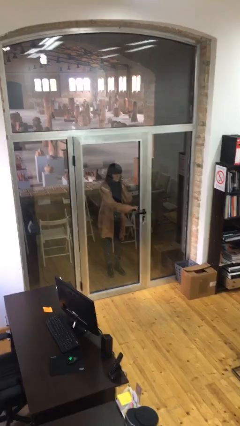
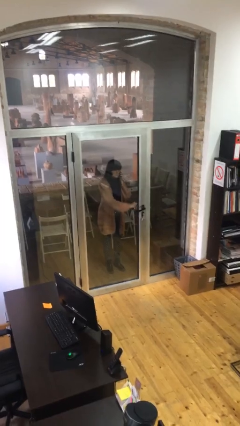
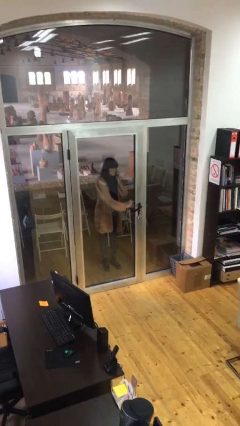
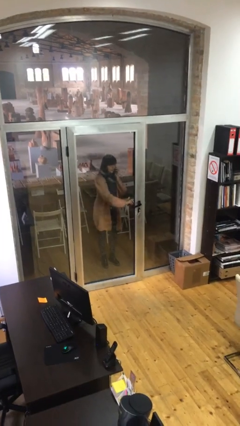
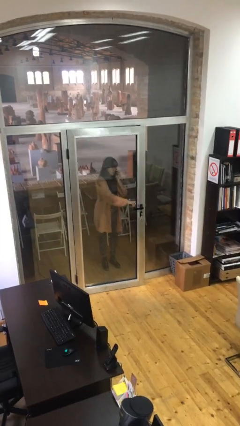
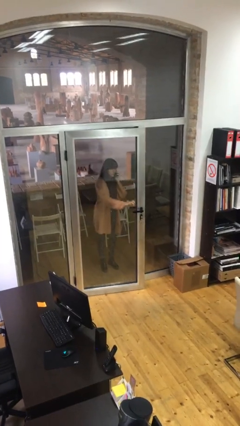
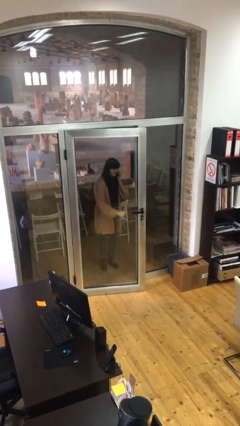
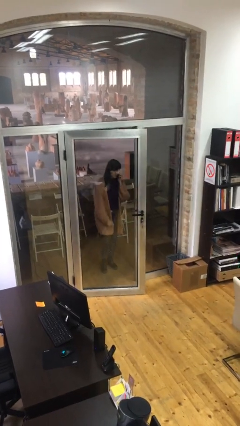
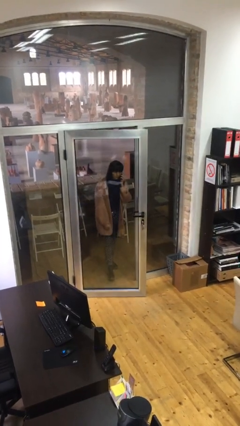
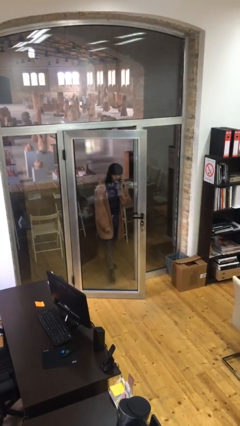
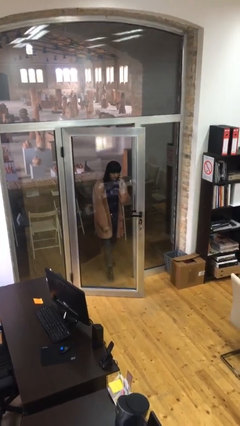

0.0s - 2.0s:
person opens facility door

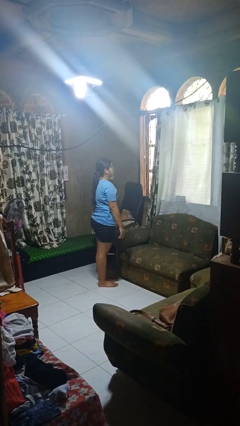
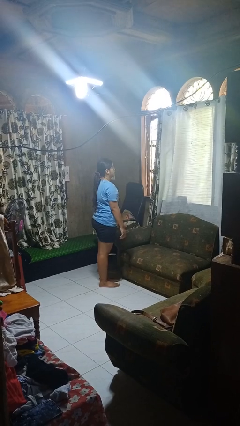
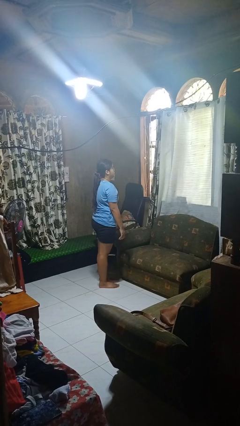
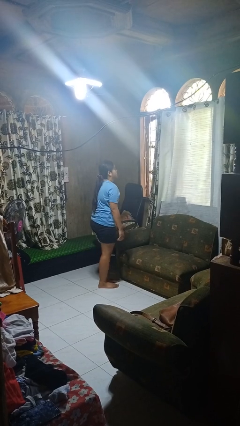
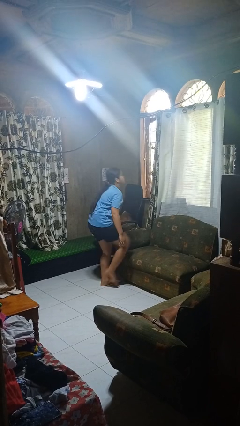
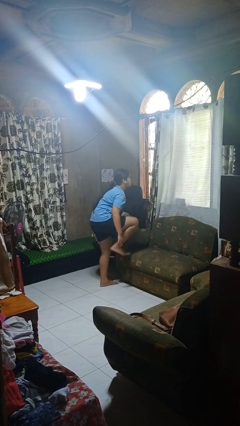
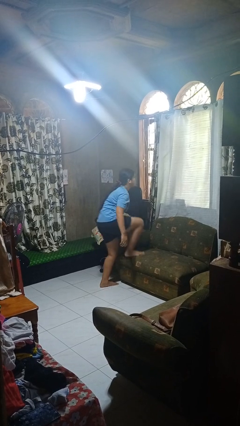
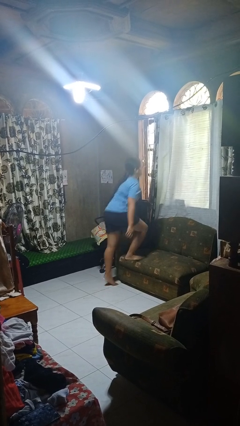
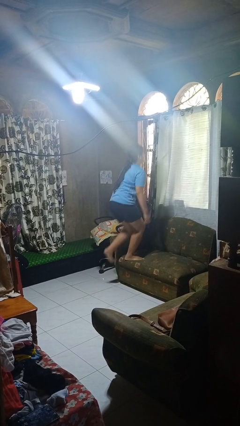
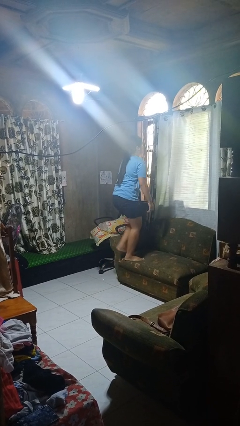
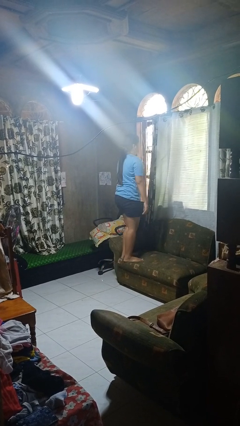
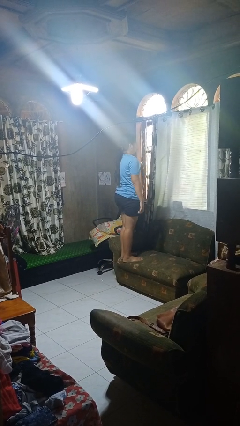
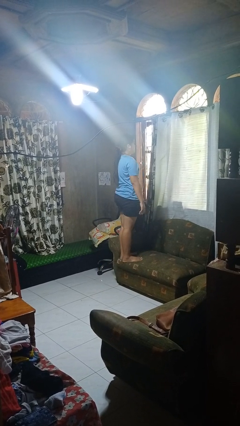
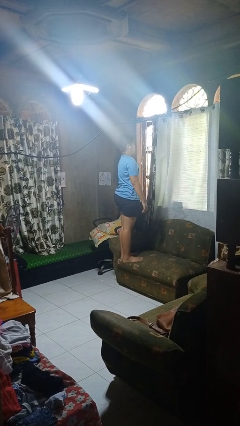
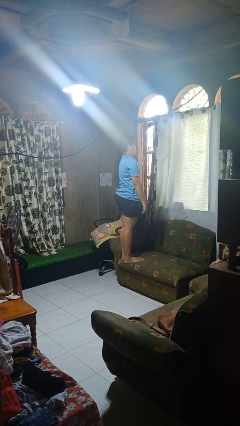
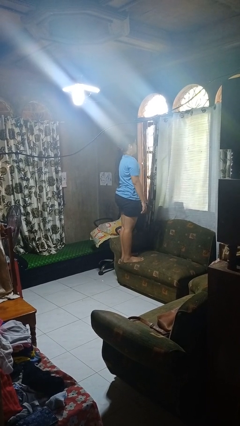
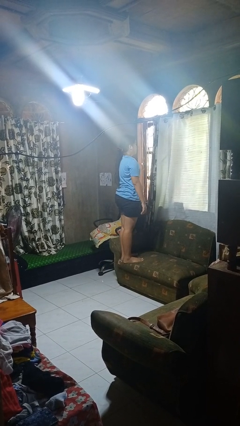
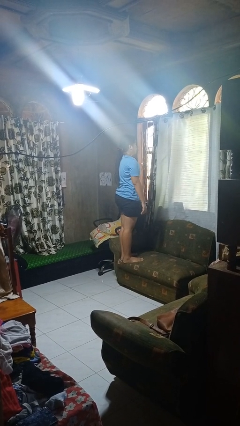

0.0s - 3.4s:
person climbs on couch

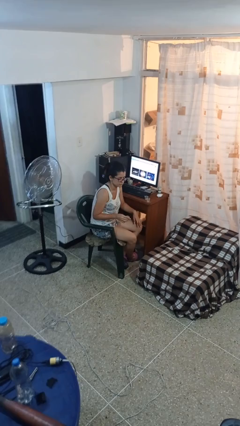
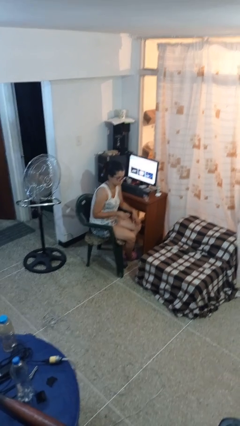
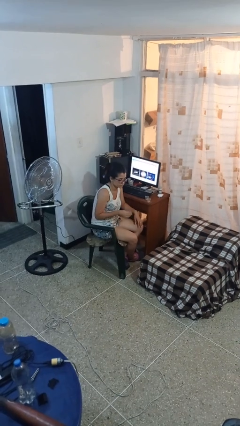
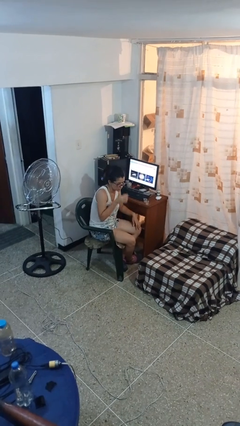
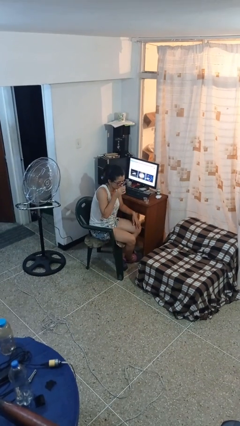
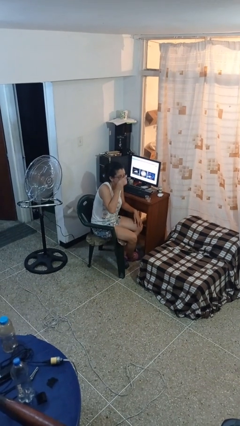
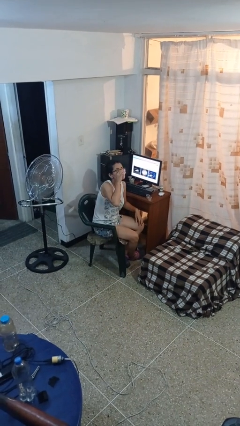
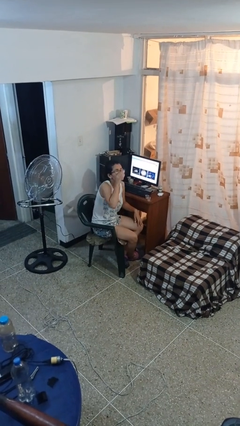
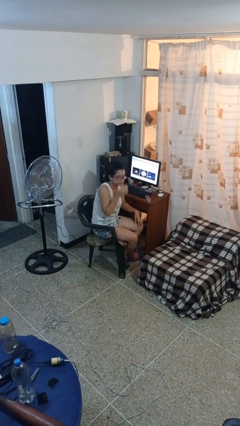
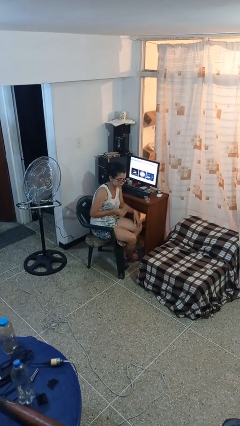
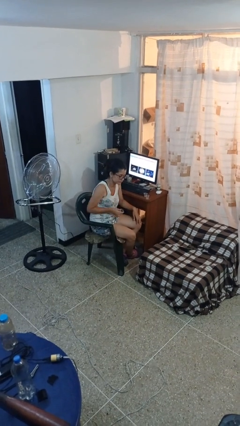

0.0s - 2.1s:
person drinks from shotglass

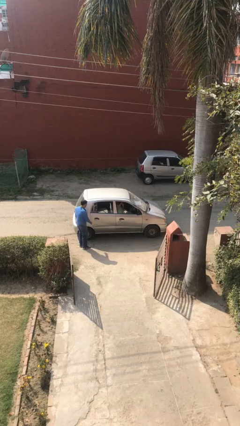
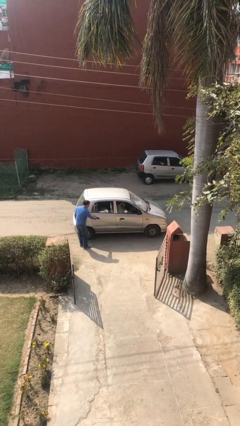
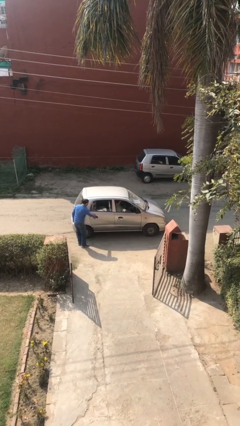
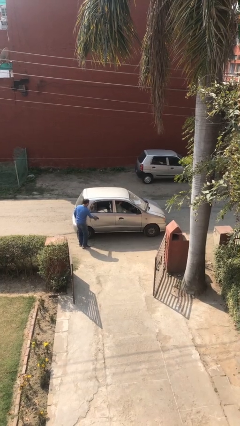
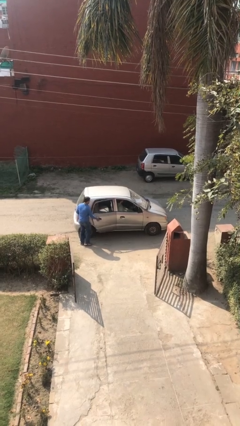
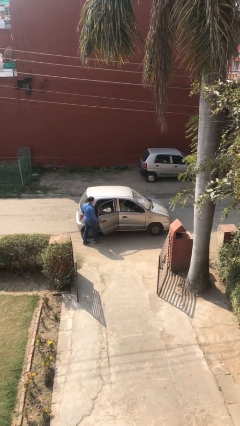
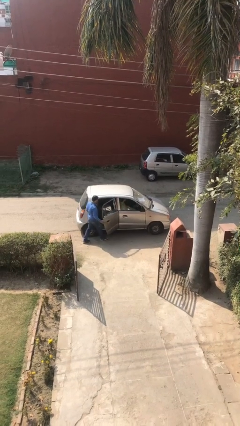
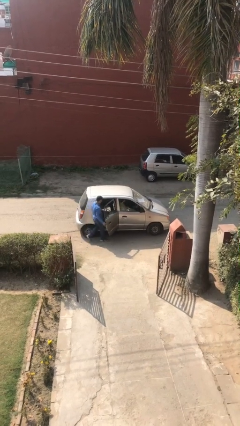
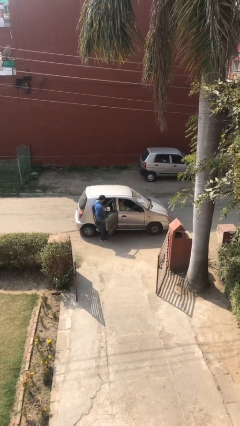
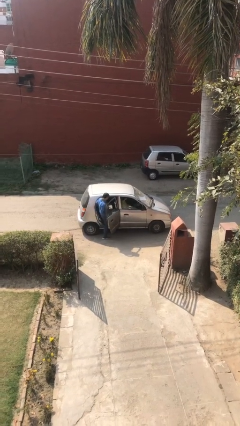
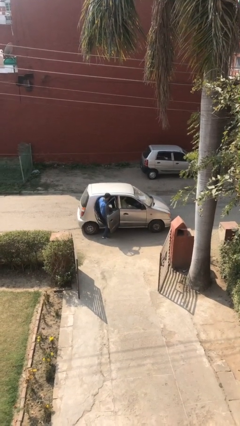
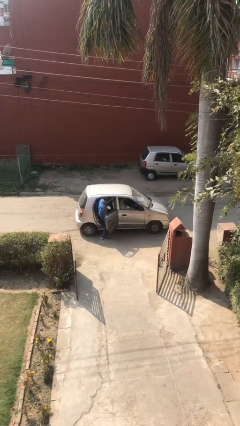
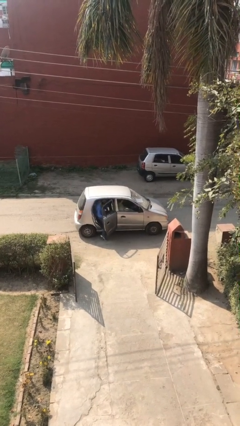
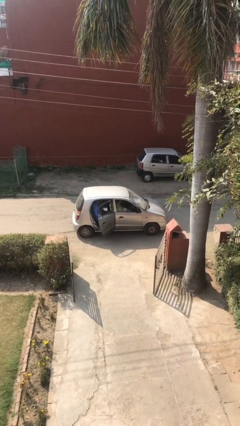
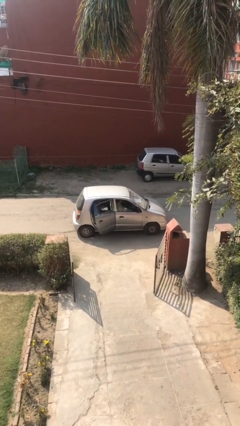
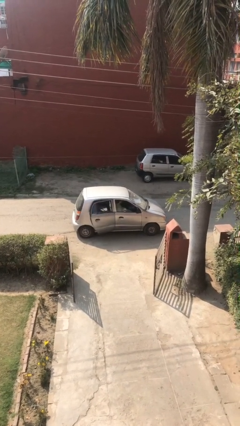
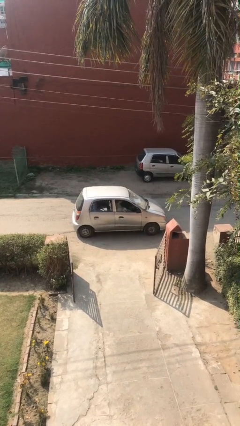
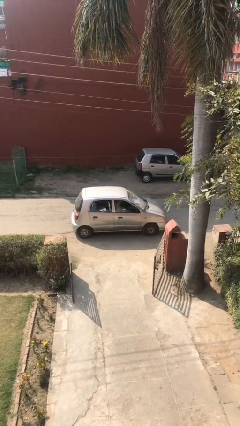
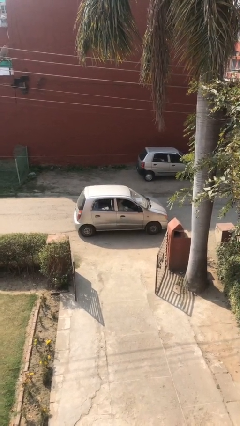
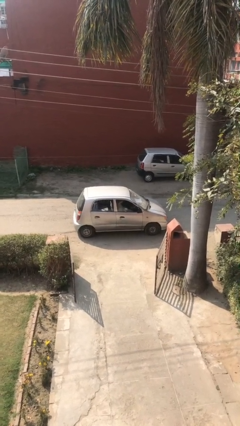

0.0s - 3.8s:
car picks up person

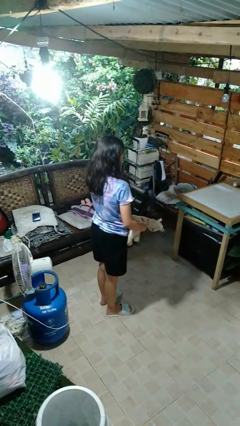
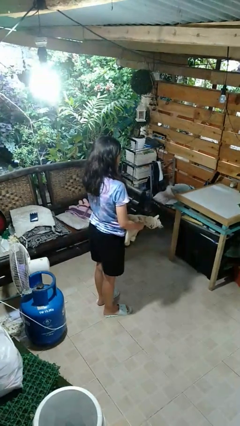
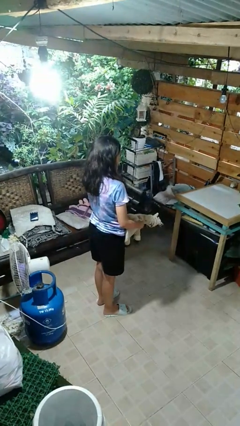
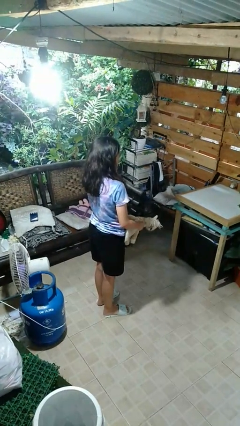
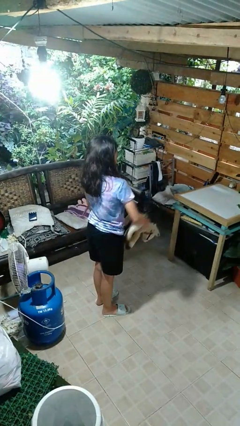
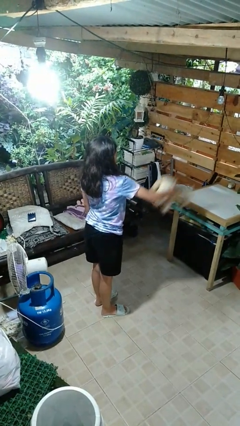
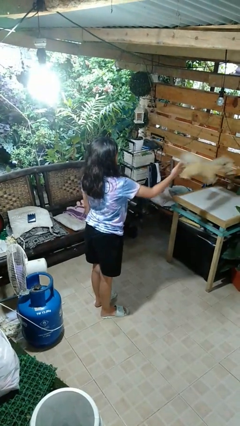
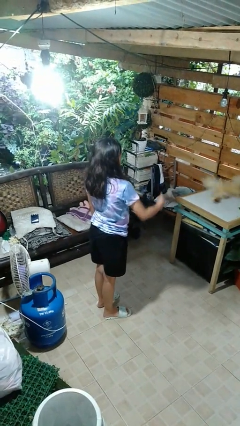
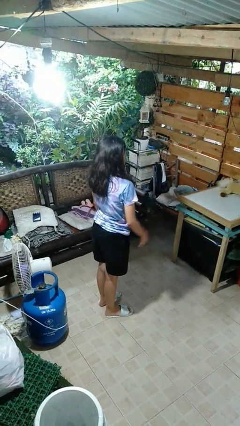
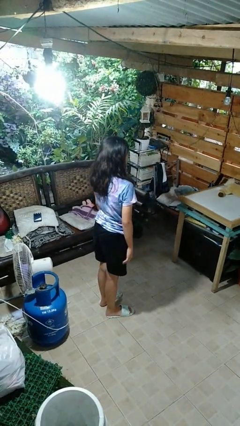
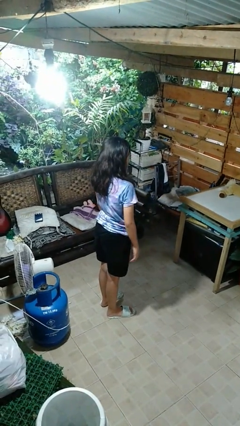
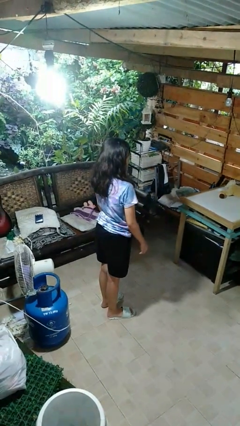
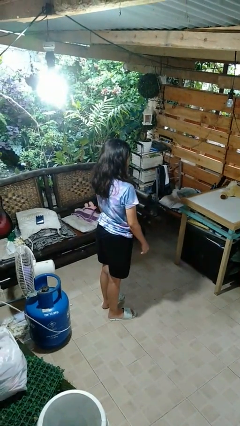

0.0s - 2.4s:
person throws object on table

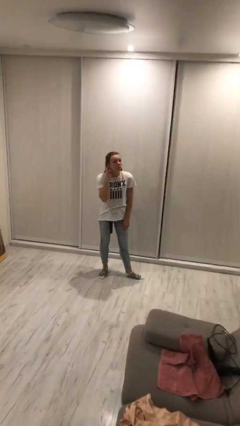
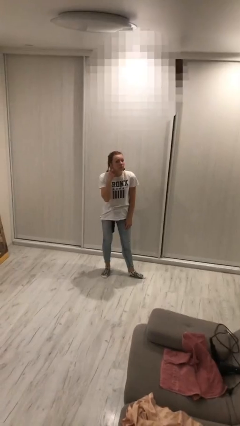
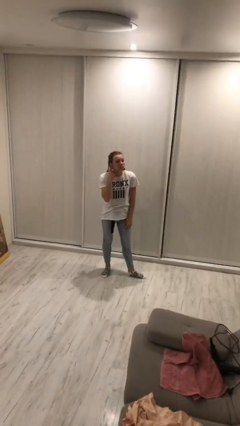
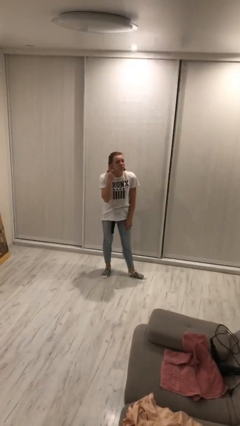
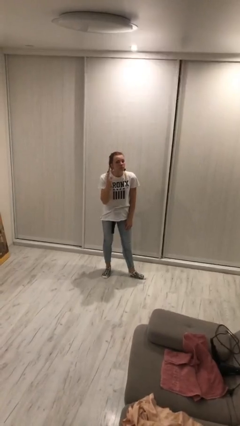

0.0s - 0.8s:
person gestures listen closely

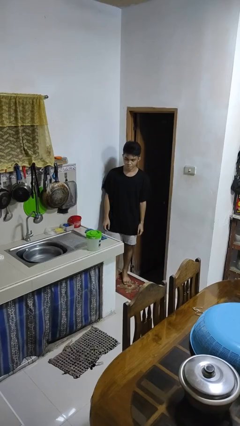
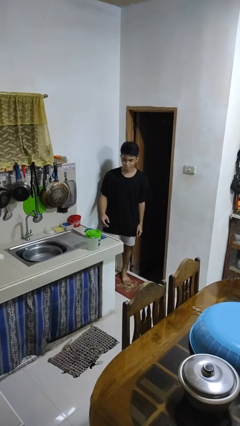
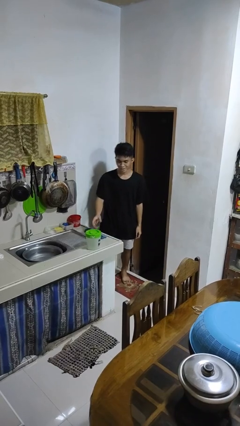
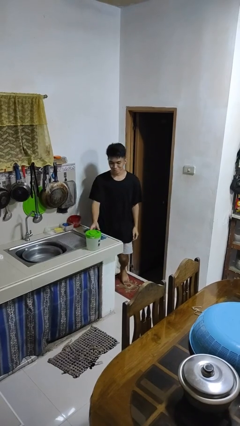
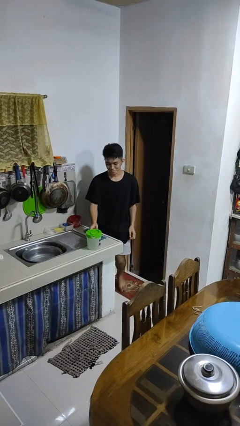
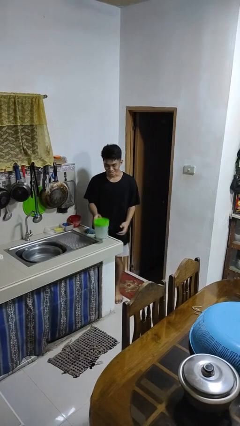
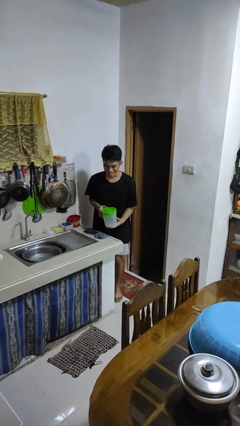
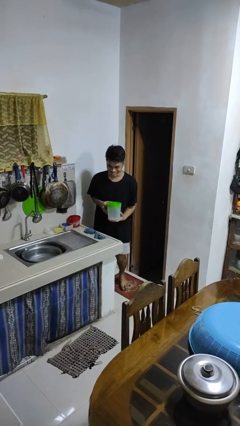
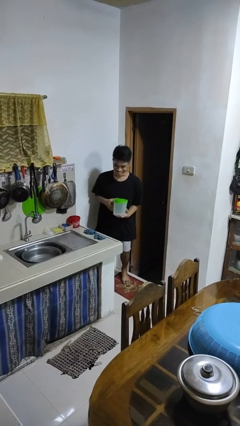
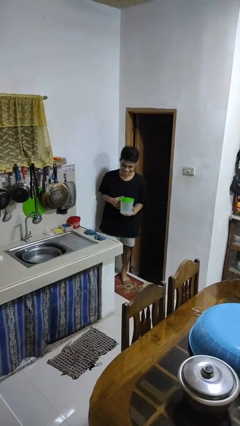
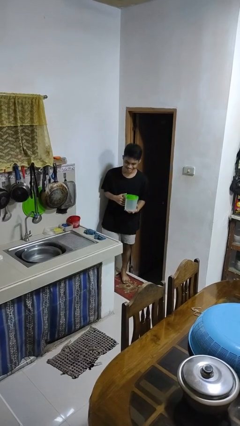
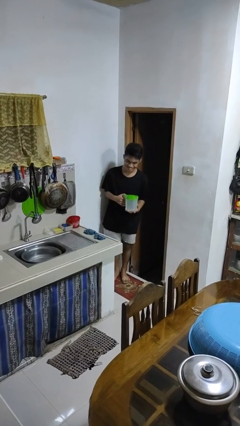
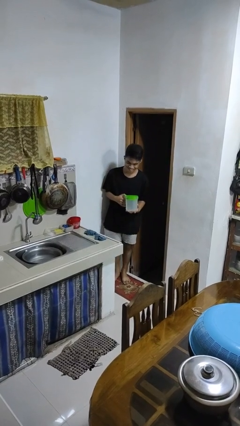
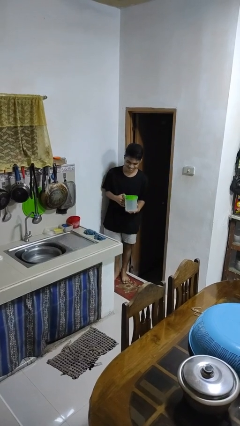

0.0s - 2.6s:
person picks up object from countertop

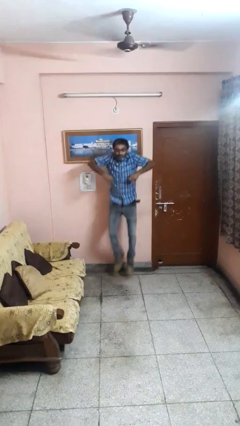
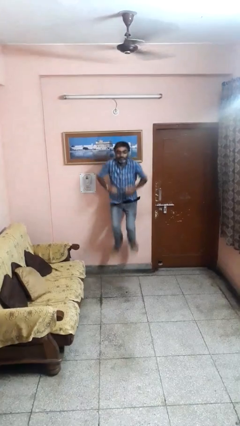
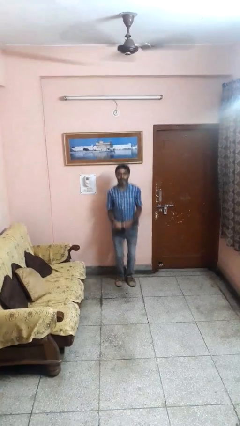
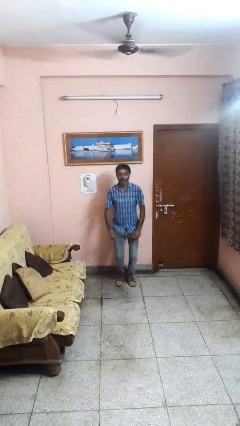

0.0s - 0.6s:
person jumps
